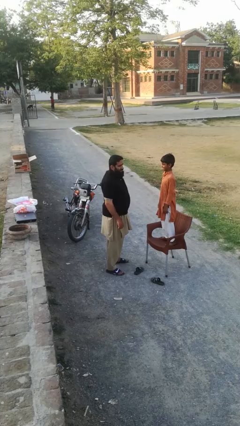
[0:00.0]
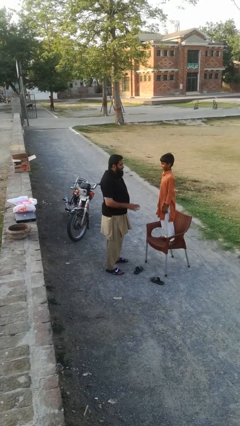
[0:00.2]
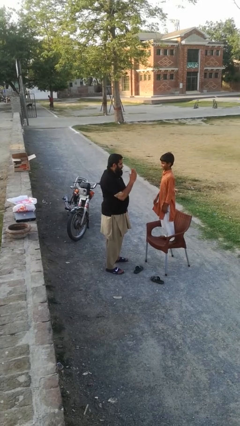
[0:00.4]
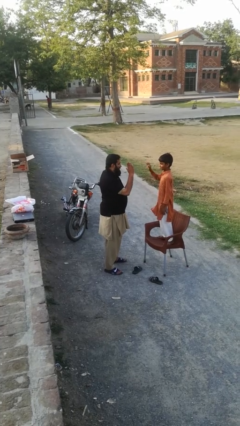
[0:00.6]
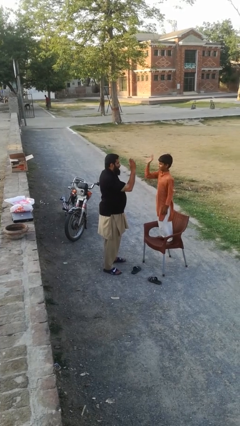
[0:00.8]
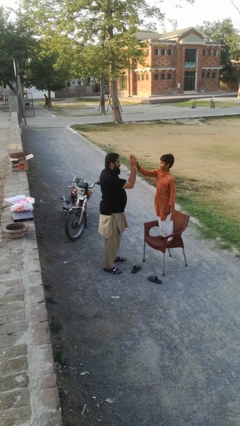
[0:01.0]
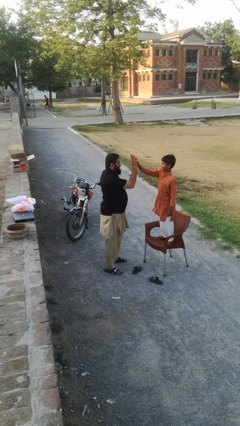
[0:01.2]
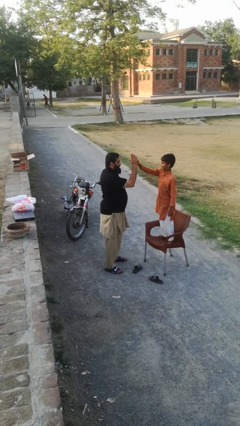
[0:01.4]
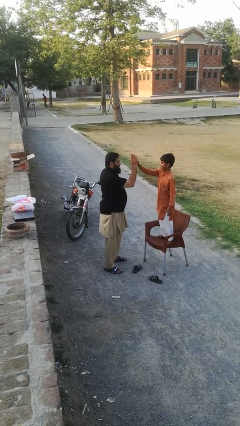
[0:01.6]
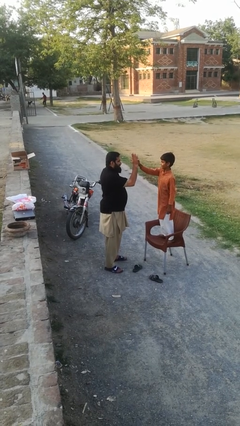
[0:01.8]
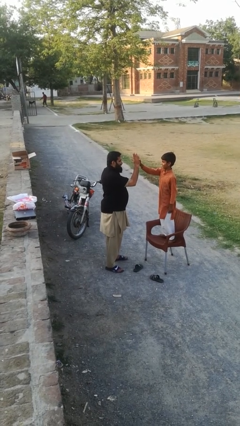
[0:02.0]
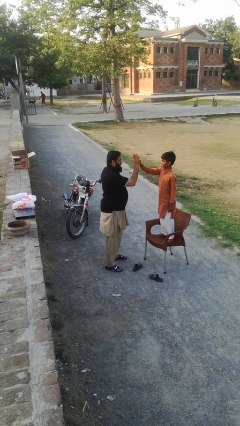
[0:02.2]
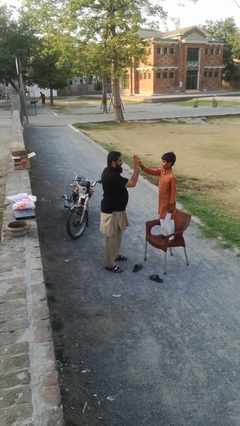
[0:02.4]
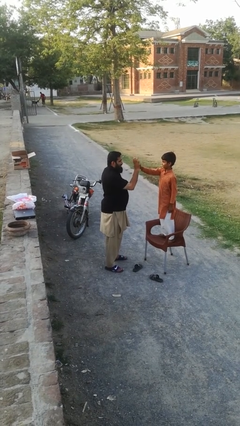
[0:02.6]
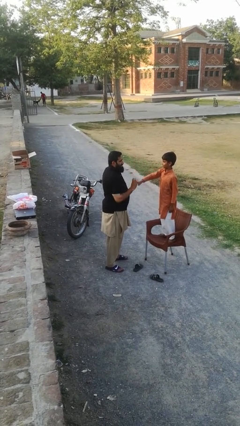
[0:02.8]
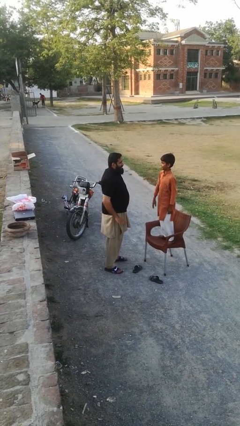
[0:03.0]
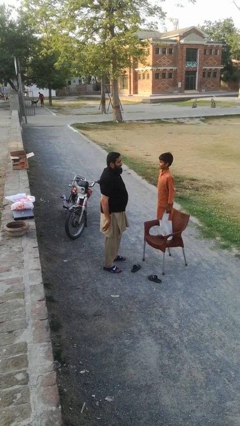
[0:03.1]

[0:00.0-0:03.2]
person highfives hand

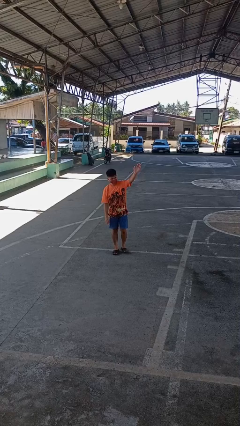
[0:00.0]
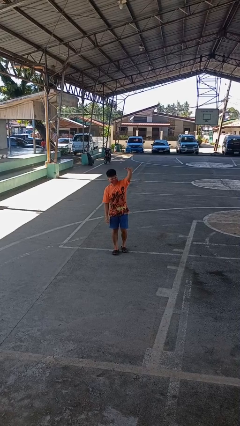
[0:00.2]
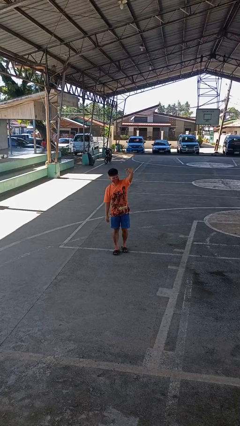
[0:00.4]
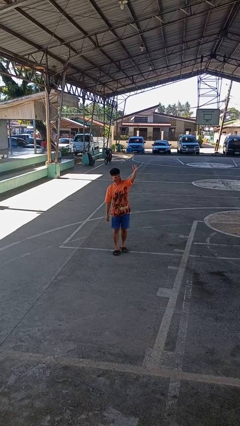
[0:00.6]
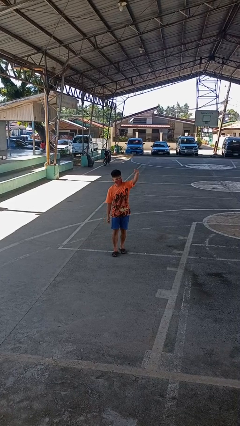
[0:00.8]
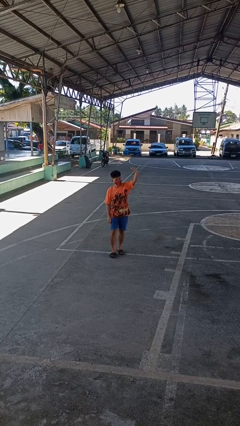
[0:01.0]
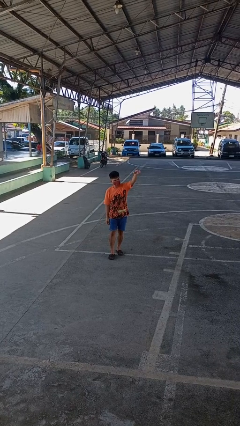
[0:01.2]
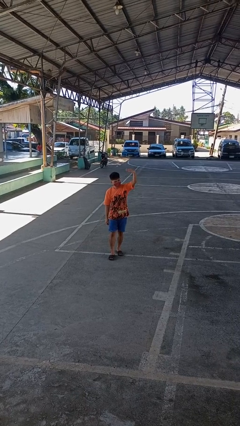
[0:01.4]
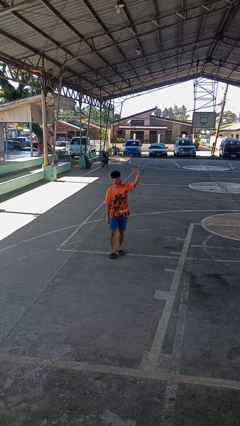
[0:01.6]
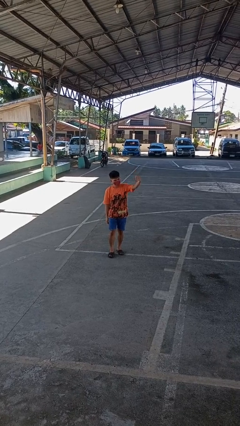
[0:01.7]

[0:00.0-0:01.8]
person gestures come here

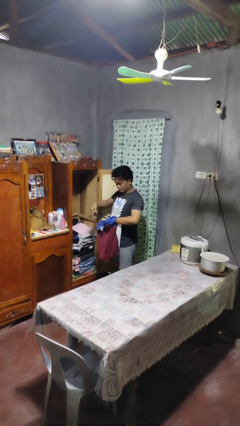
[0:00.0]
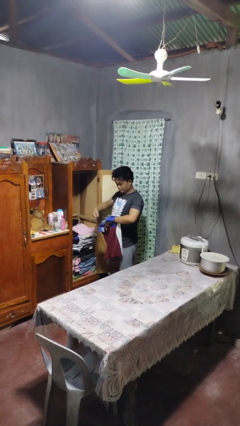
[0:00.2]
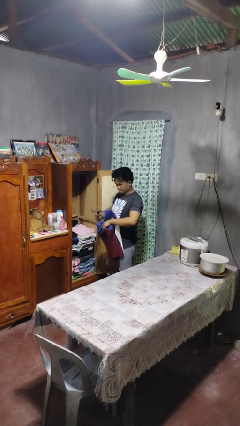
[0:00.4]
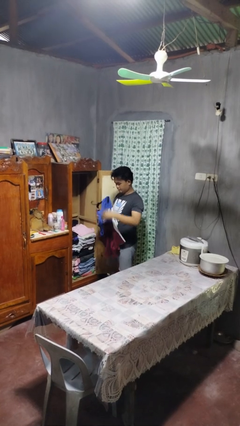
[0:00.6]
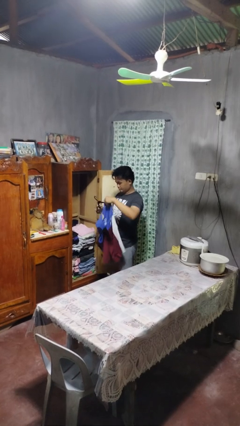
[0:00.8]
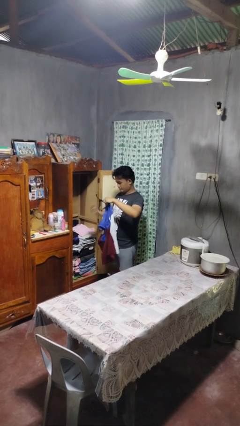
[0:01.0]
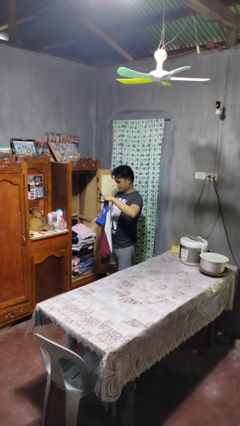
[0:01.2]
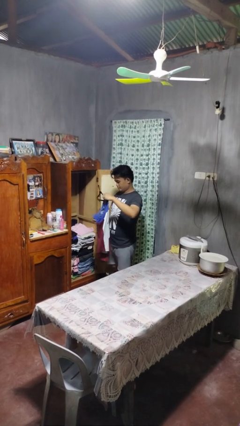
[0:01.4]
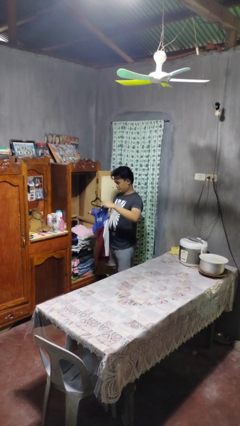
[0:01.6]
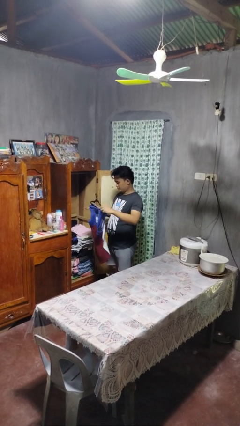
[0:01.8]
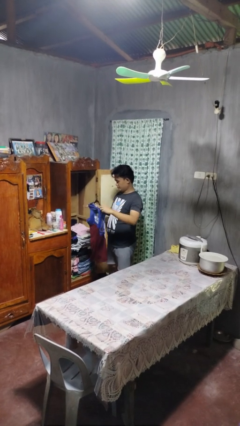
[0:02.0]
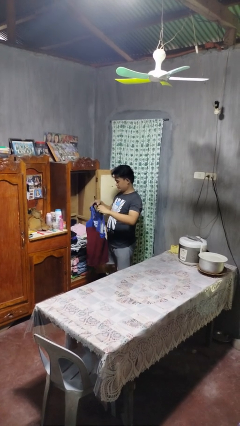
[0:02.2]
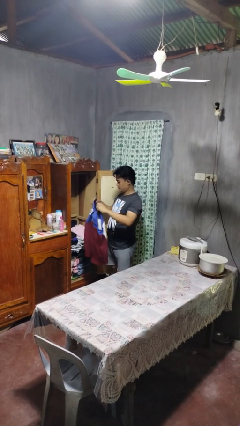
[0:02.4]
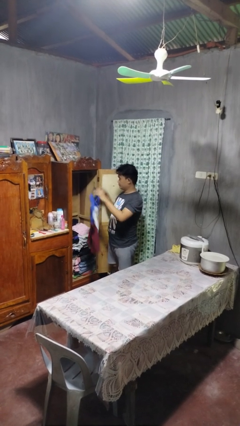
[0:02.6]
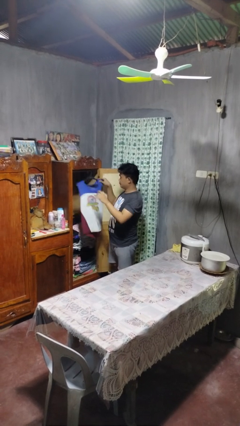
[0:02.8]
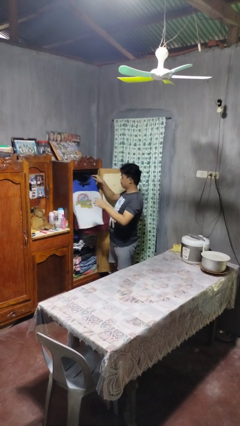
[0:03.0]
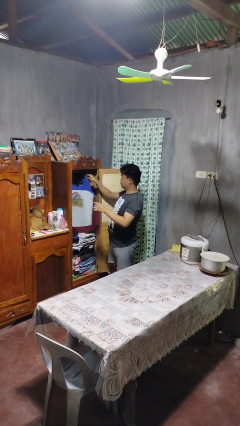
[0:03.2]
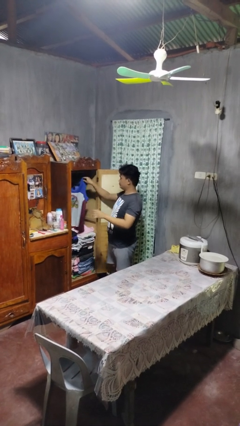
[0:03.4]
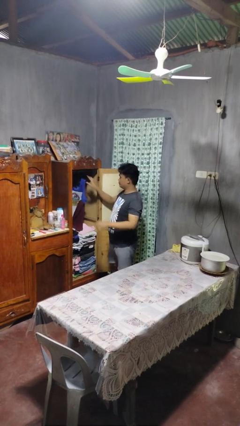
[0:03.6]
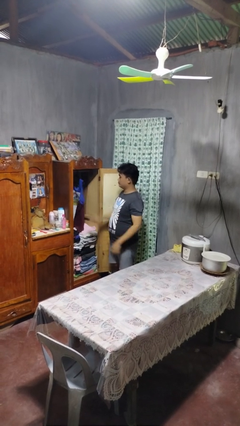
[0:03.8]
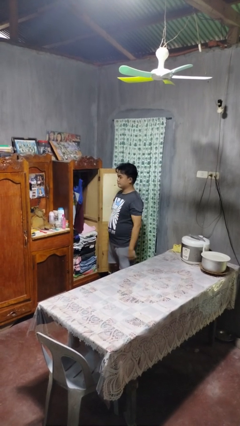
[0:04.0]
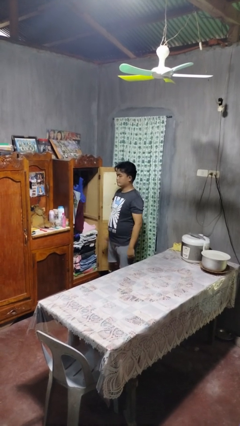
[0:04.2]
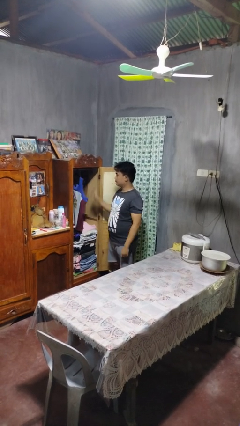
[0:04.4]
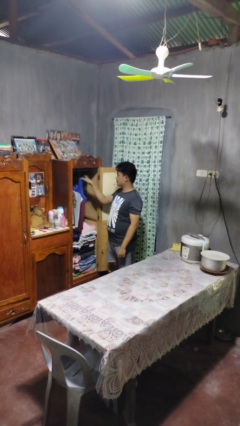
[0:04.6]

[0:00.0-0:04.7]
person puts clothes into closet

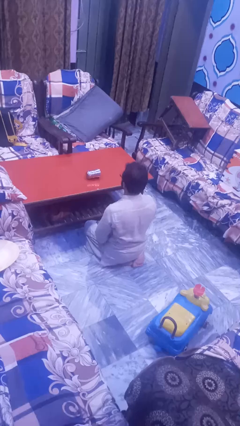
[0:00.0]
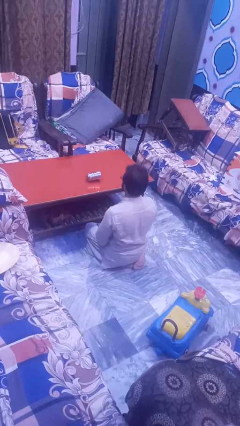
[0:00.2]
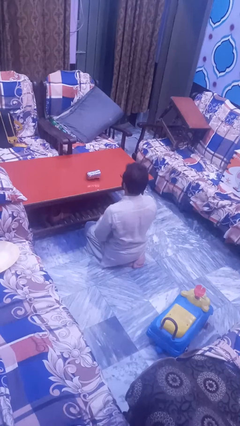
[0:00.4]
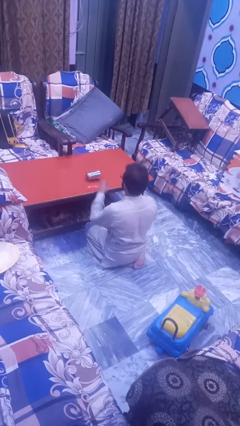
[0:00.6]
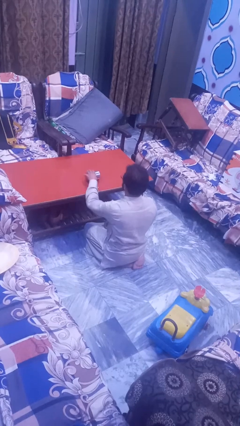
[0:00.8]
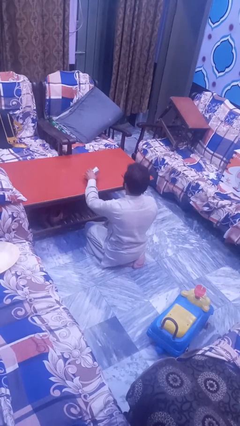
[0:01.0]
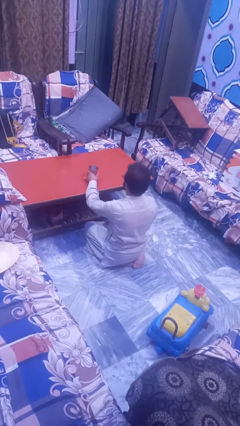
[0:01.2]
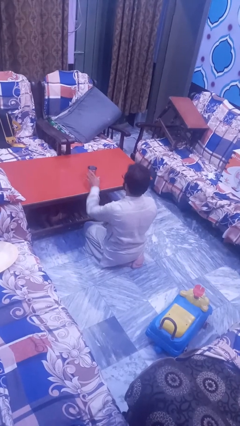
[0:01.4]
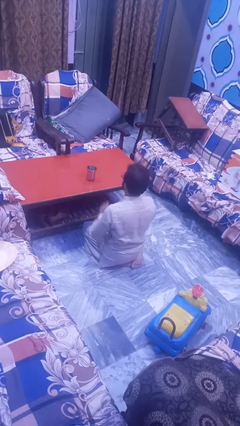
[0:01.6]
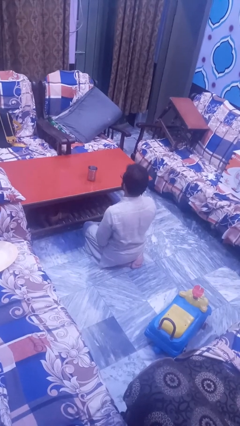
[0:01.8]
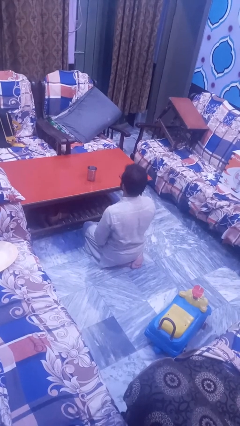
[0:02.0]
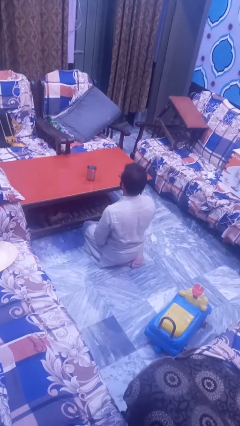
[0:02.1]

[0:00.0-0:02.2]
person sets upright glass

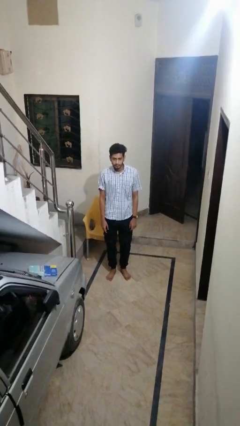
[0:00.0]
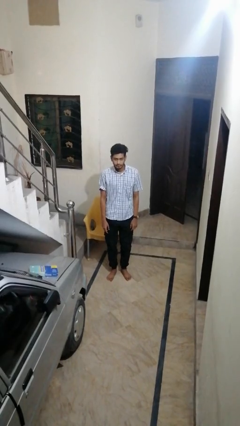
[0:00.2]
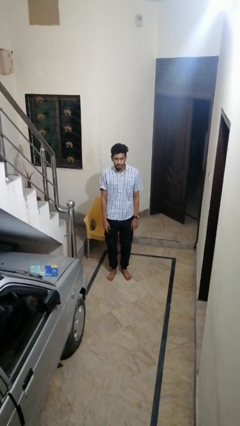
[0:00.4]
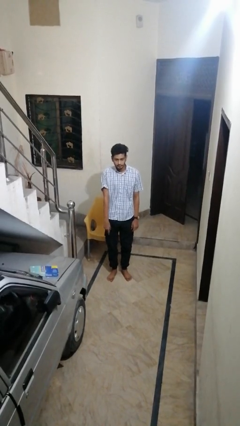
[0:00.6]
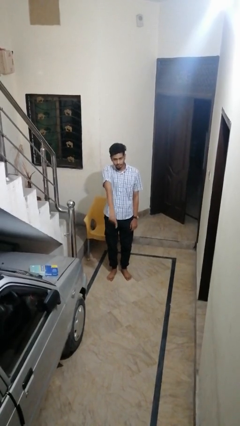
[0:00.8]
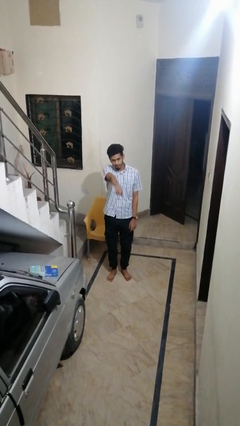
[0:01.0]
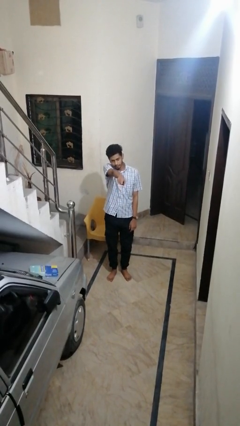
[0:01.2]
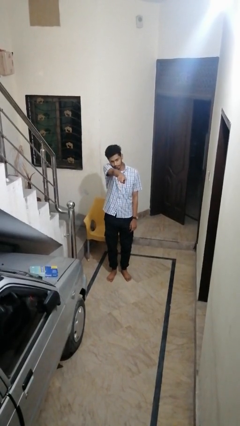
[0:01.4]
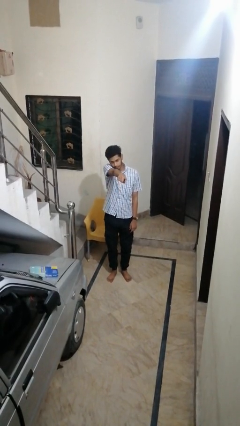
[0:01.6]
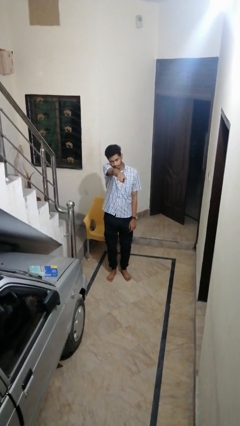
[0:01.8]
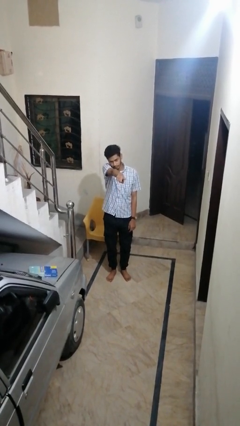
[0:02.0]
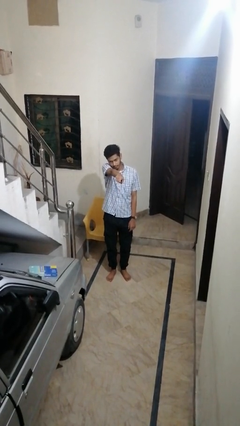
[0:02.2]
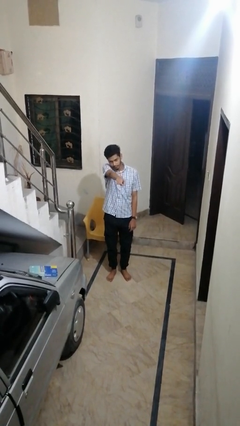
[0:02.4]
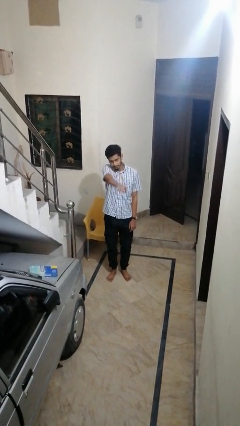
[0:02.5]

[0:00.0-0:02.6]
person points at person

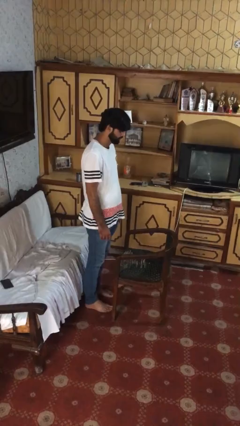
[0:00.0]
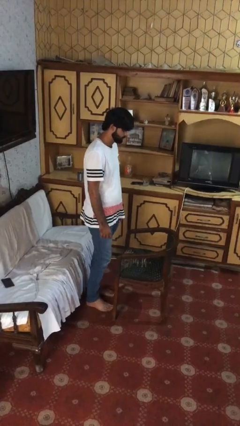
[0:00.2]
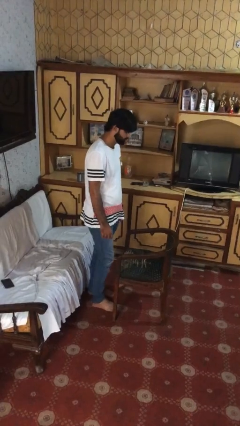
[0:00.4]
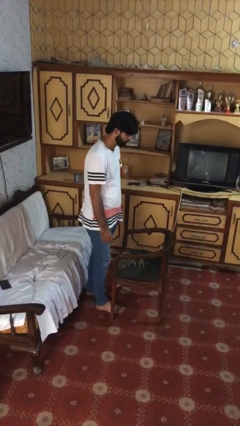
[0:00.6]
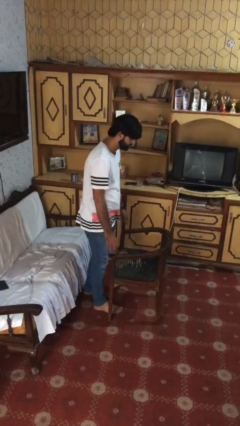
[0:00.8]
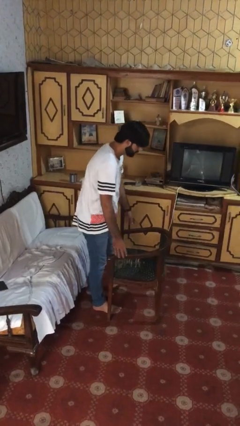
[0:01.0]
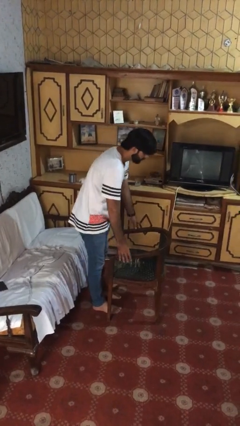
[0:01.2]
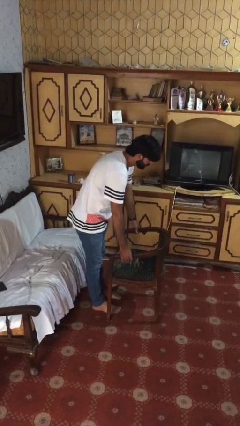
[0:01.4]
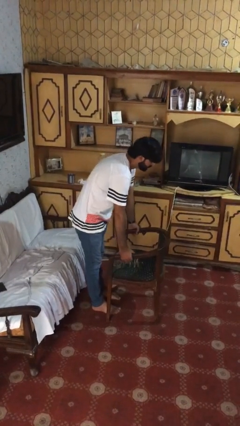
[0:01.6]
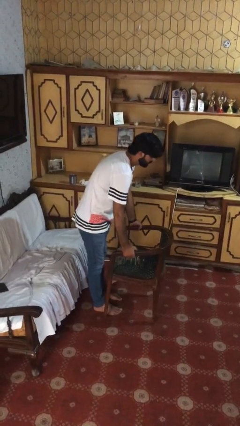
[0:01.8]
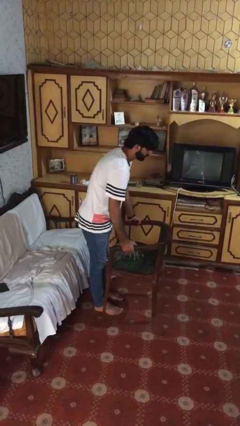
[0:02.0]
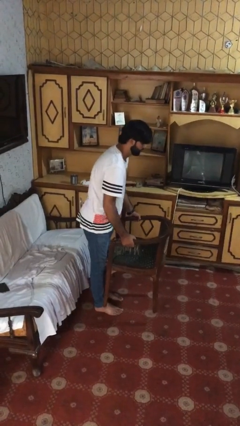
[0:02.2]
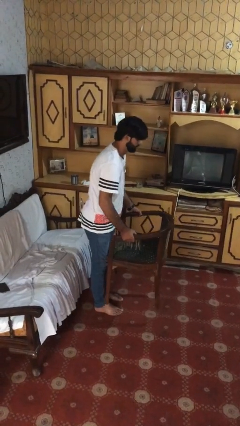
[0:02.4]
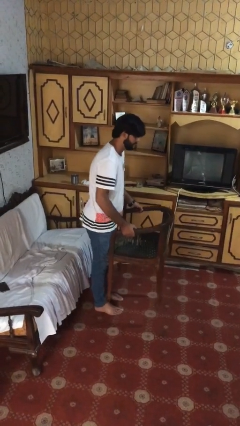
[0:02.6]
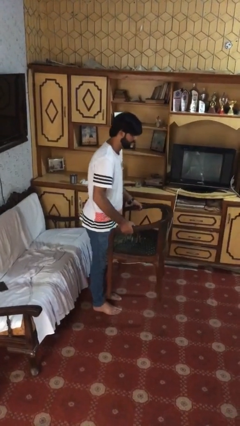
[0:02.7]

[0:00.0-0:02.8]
person picks up object from floor
